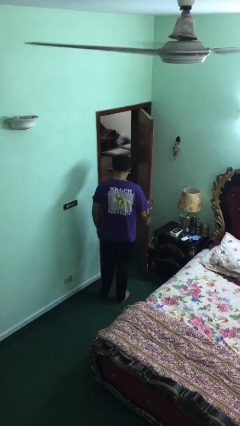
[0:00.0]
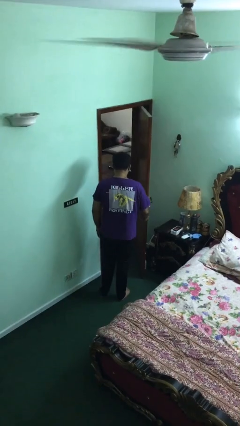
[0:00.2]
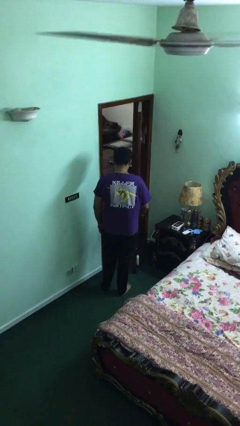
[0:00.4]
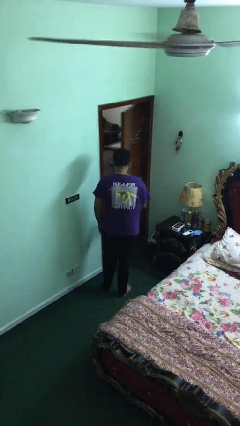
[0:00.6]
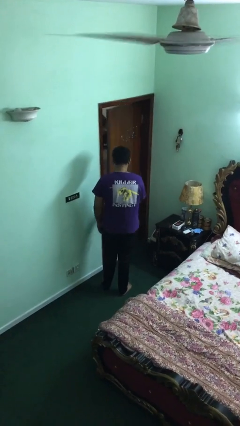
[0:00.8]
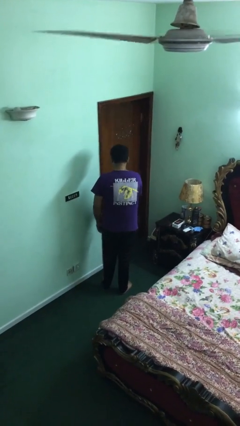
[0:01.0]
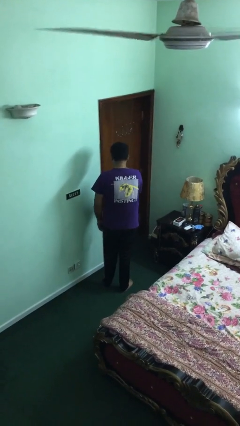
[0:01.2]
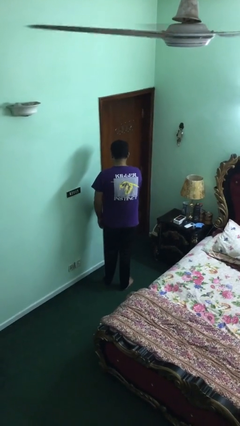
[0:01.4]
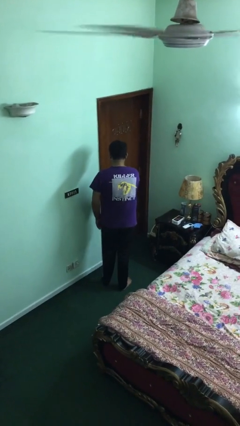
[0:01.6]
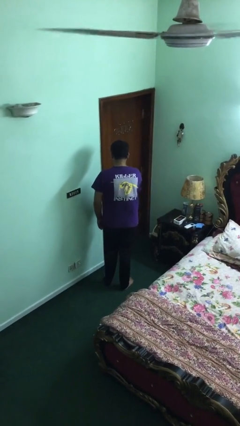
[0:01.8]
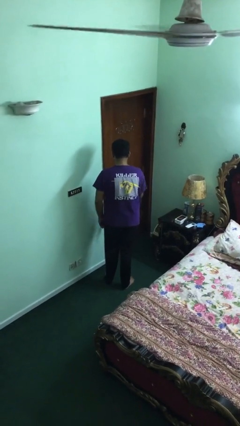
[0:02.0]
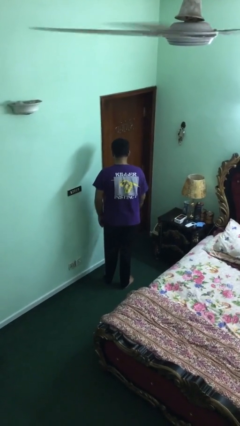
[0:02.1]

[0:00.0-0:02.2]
person closes facility door

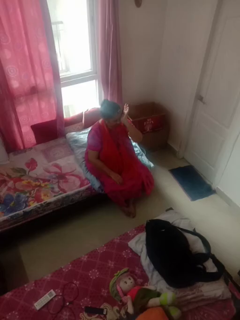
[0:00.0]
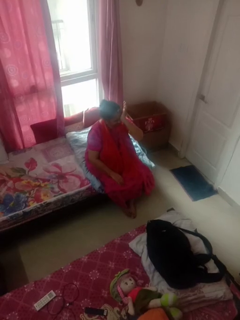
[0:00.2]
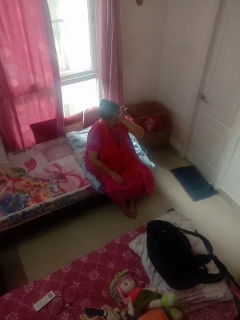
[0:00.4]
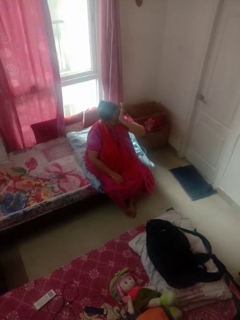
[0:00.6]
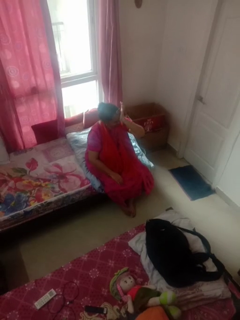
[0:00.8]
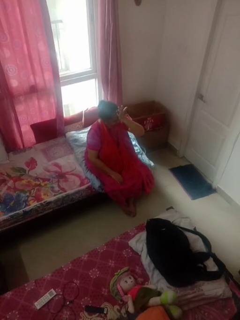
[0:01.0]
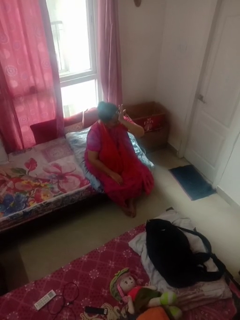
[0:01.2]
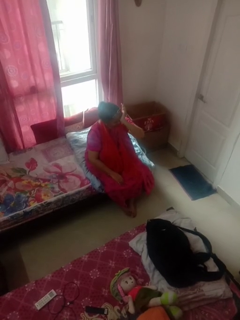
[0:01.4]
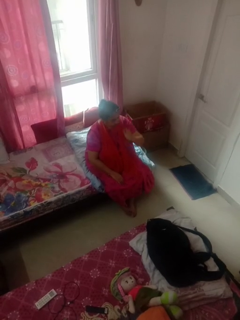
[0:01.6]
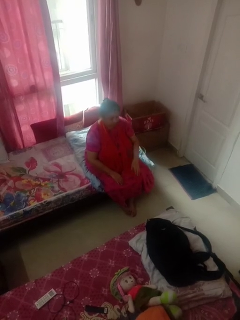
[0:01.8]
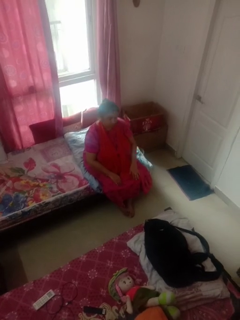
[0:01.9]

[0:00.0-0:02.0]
person rubs eyes

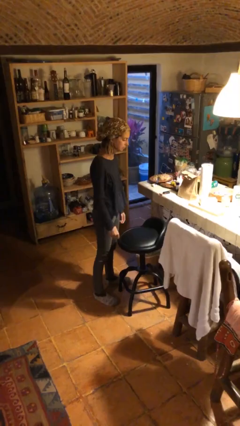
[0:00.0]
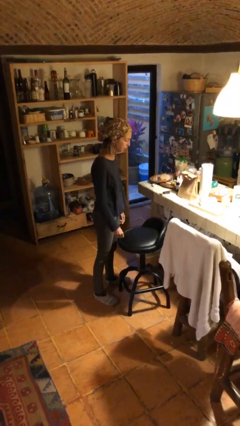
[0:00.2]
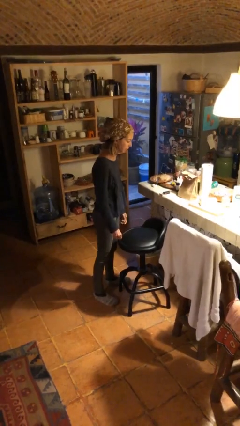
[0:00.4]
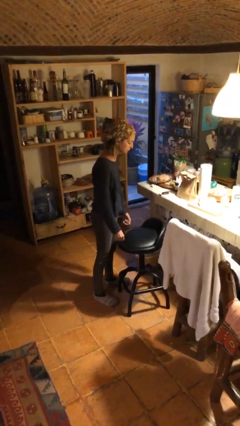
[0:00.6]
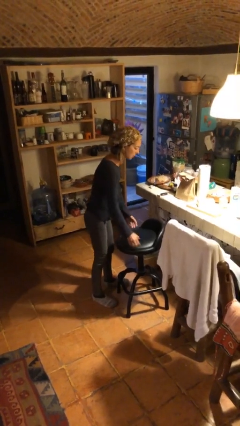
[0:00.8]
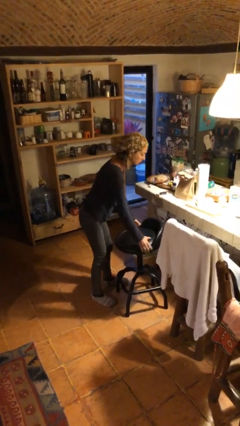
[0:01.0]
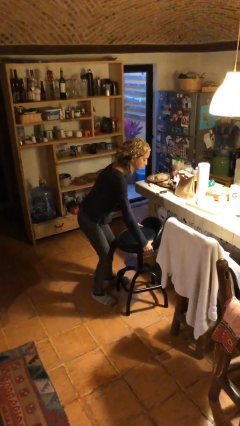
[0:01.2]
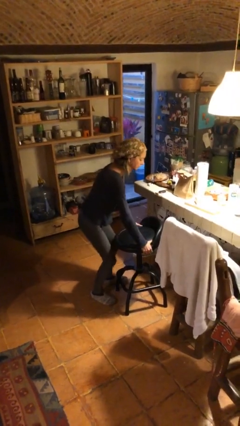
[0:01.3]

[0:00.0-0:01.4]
person picks up object from floor

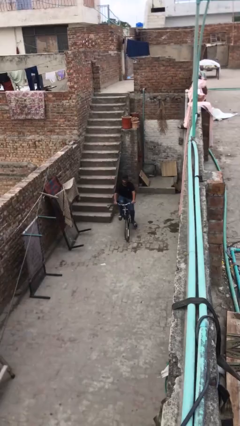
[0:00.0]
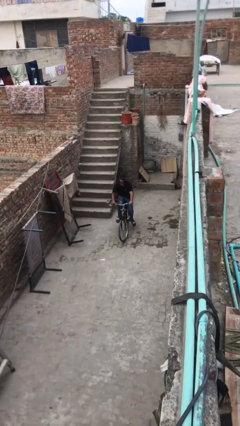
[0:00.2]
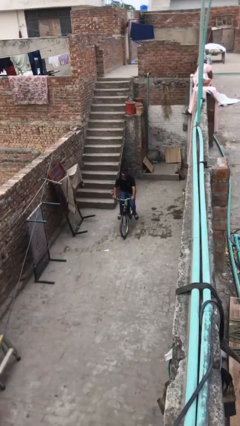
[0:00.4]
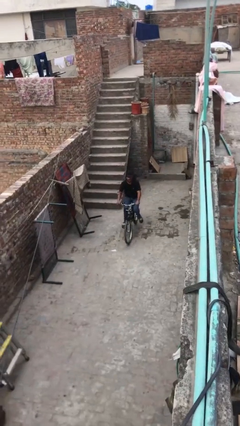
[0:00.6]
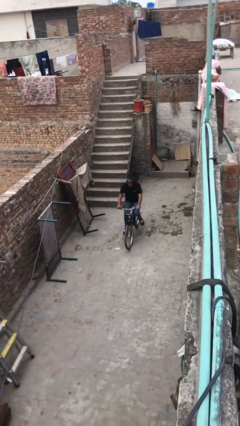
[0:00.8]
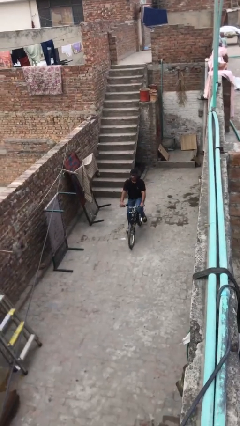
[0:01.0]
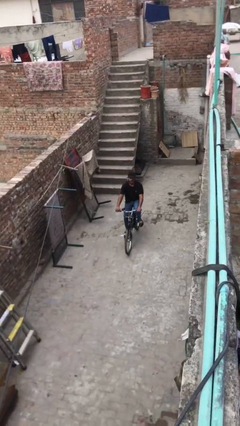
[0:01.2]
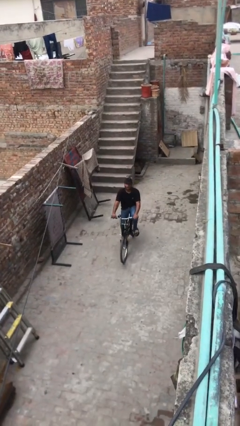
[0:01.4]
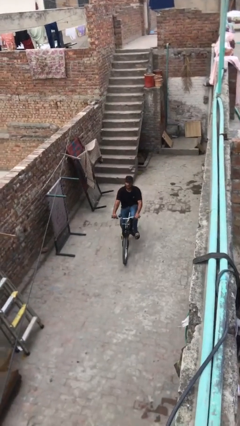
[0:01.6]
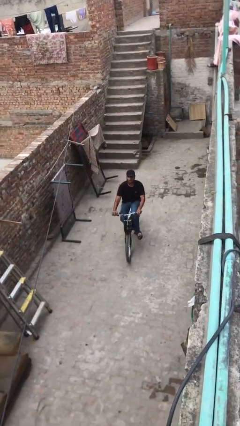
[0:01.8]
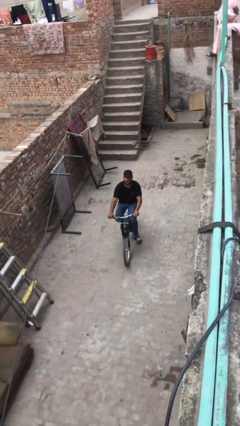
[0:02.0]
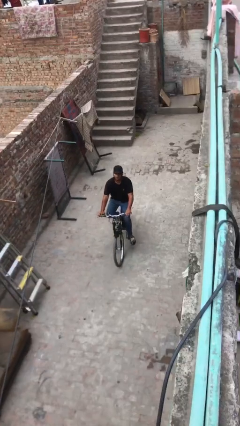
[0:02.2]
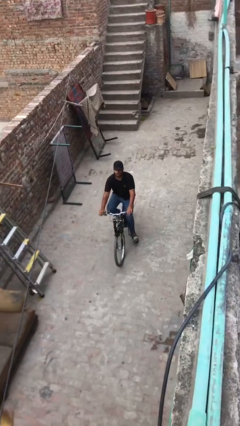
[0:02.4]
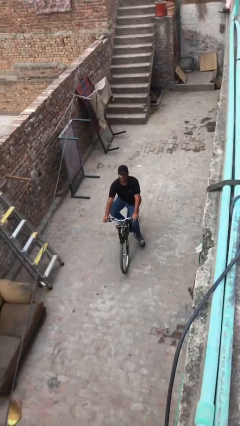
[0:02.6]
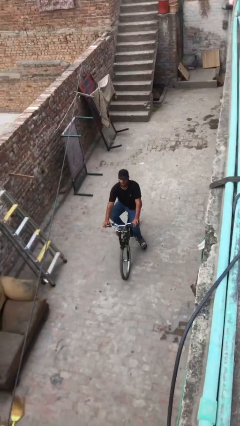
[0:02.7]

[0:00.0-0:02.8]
person rides bicycle

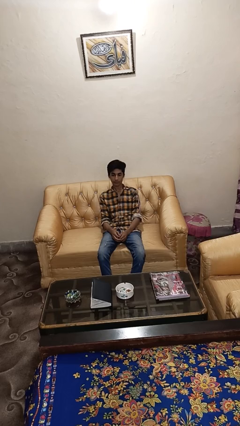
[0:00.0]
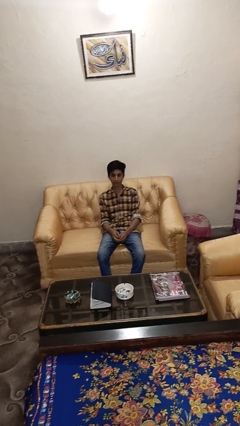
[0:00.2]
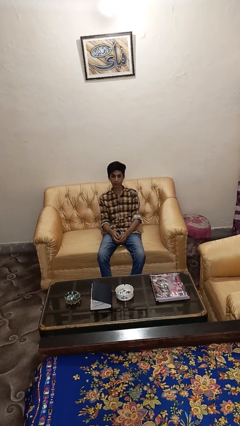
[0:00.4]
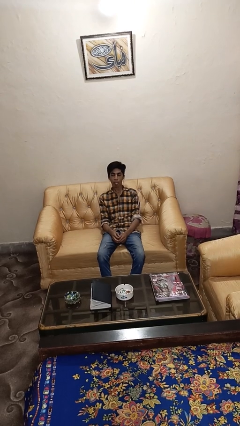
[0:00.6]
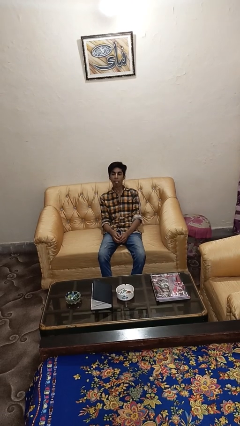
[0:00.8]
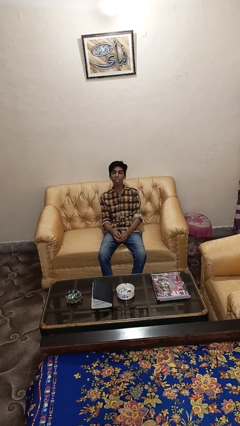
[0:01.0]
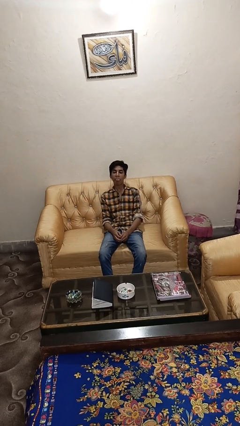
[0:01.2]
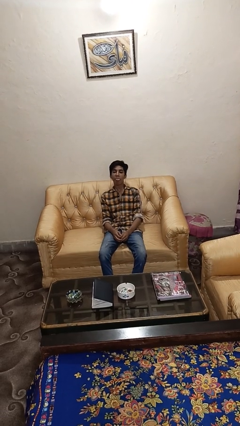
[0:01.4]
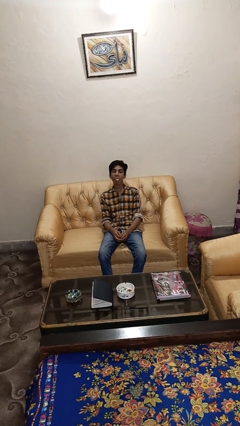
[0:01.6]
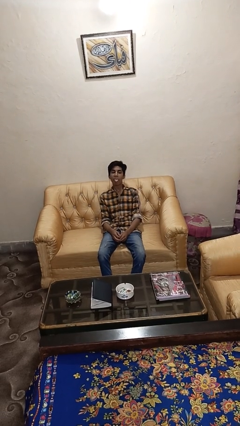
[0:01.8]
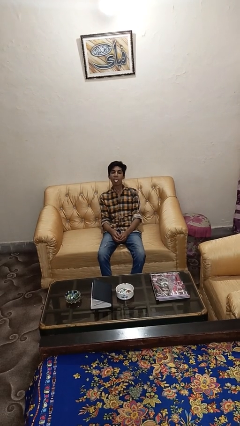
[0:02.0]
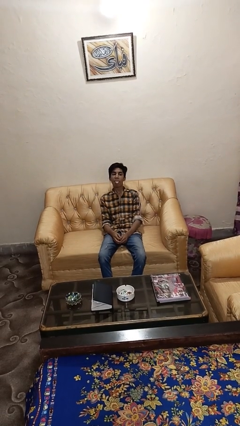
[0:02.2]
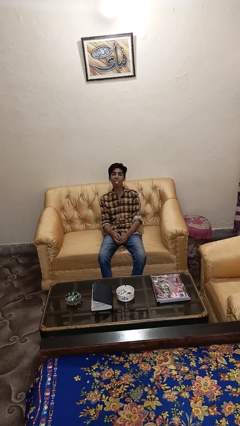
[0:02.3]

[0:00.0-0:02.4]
person sticks out tongue

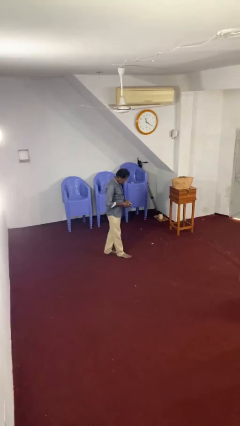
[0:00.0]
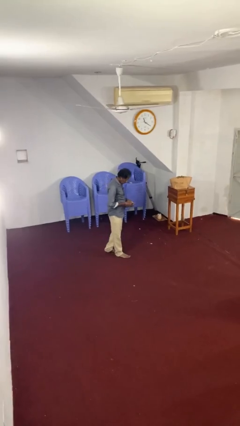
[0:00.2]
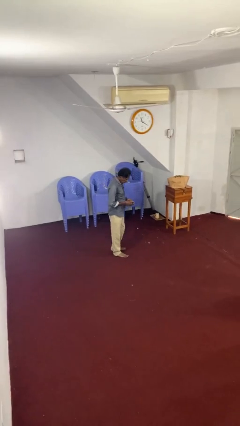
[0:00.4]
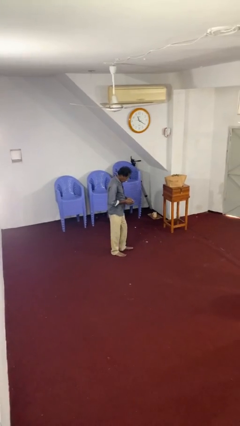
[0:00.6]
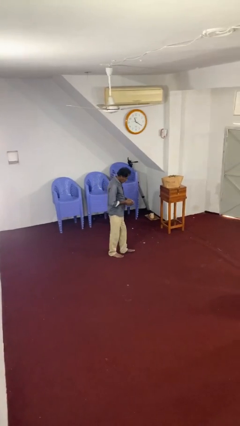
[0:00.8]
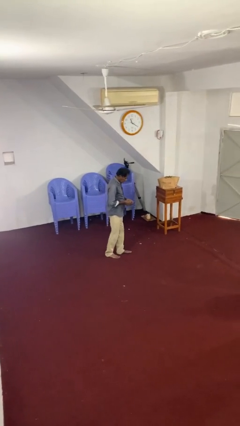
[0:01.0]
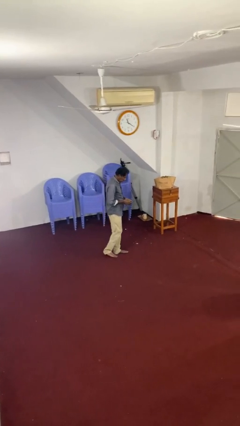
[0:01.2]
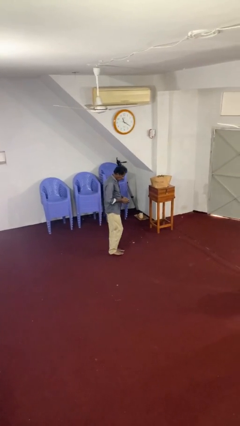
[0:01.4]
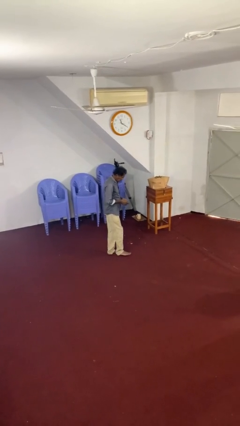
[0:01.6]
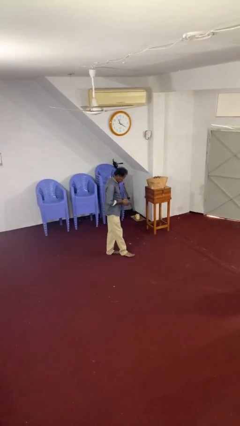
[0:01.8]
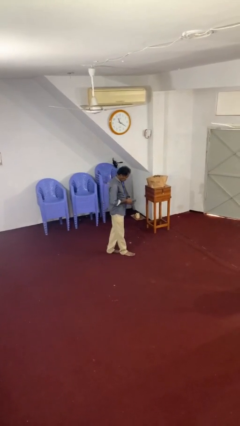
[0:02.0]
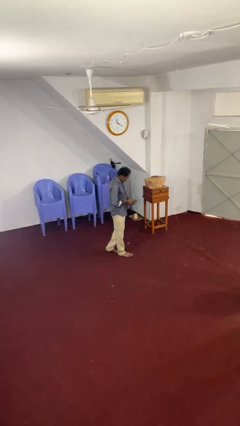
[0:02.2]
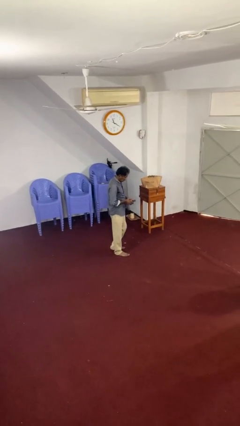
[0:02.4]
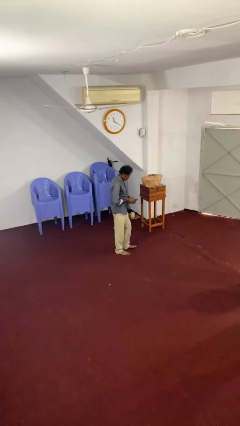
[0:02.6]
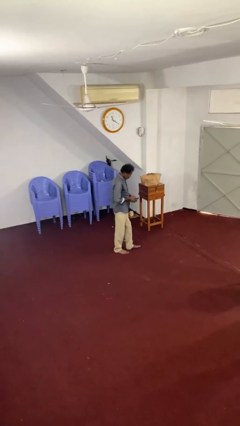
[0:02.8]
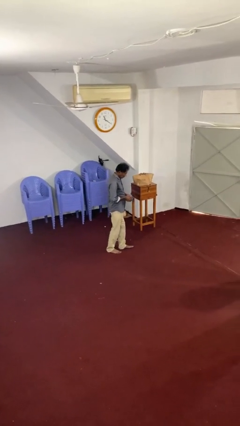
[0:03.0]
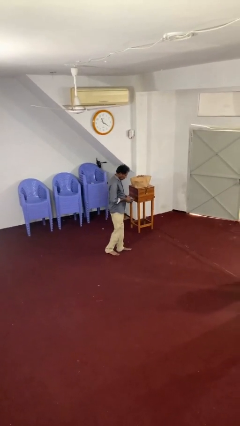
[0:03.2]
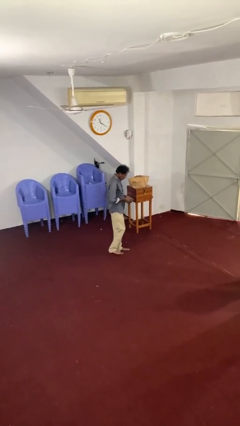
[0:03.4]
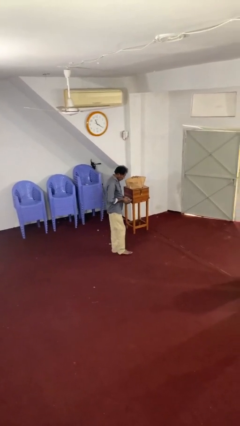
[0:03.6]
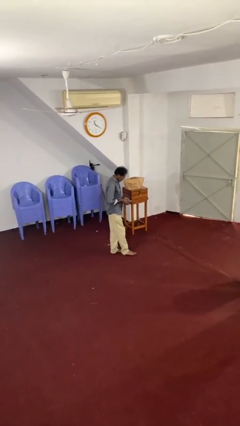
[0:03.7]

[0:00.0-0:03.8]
person texts on phone

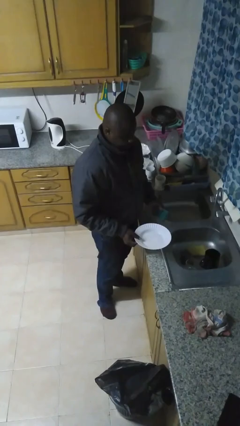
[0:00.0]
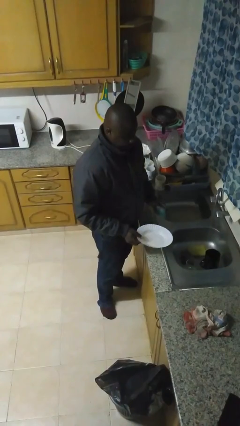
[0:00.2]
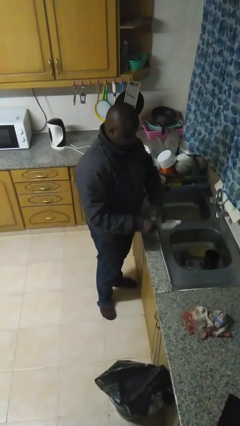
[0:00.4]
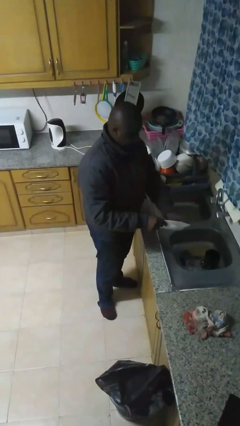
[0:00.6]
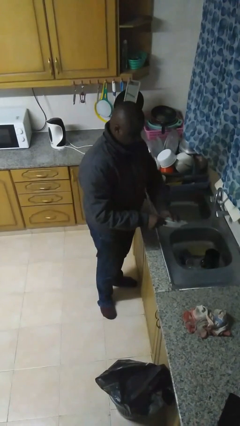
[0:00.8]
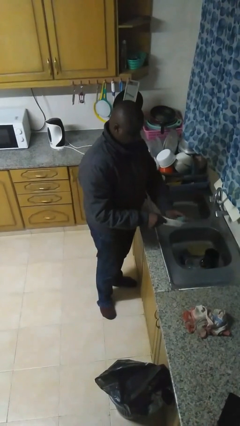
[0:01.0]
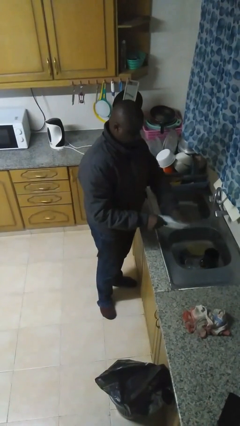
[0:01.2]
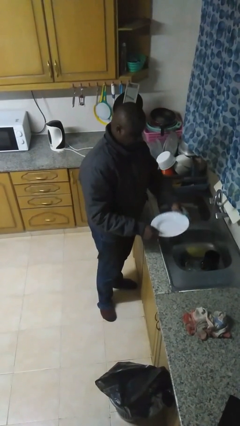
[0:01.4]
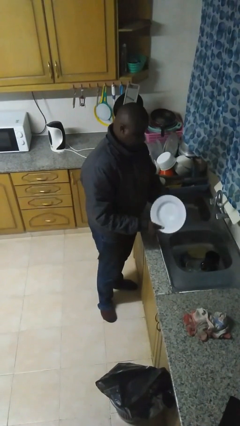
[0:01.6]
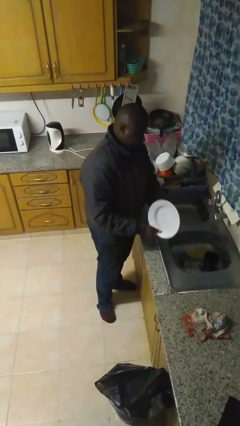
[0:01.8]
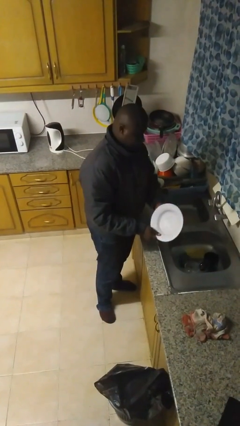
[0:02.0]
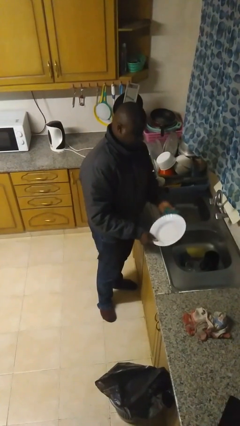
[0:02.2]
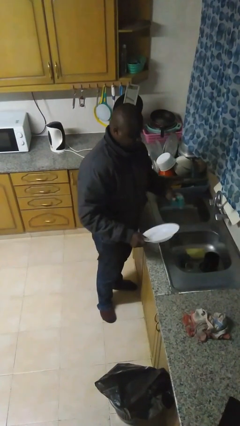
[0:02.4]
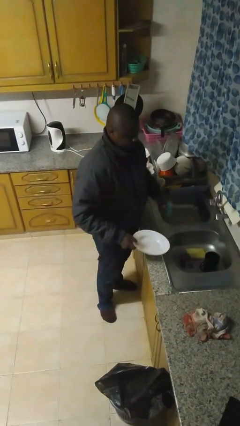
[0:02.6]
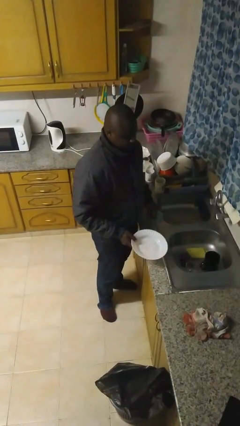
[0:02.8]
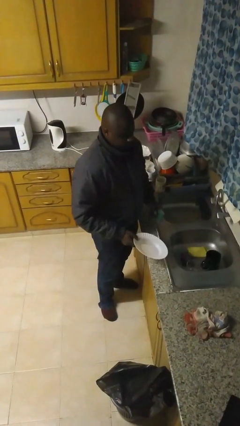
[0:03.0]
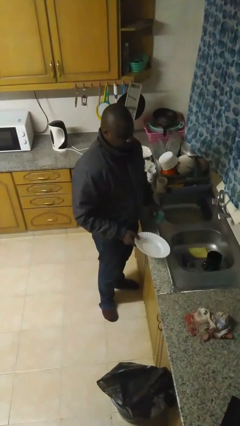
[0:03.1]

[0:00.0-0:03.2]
person washes dish
